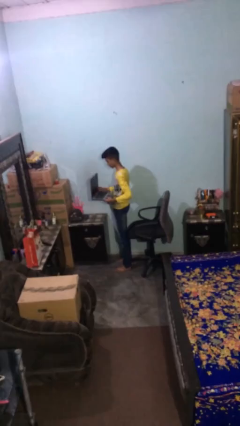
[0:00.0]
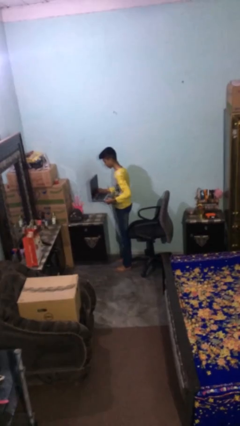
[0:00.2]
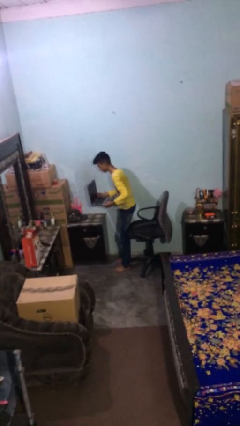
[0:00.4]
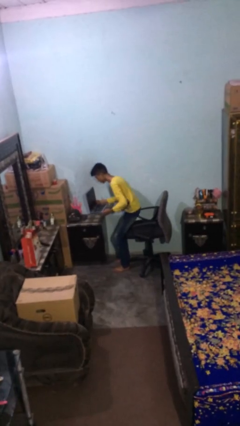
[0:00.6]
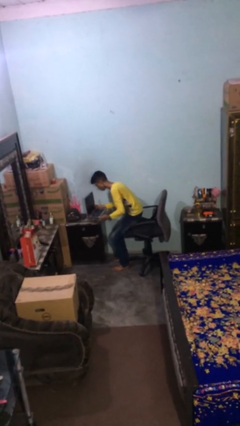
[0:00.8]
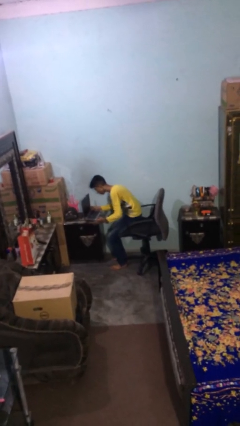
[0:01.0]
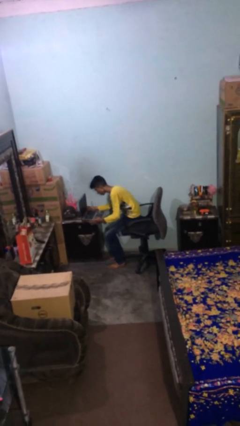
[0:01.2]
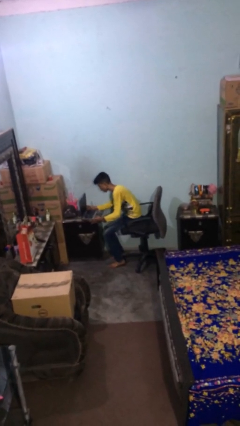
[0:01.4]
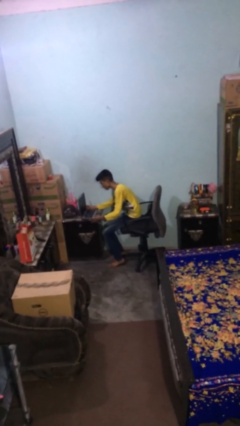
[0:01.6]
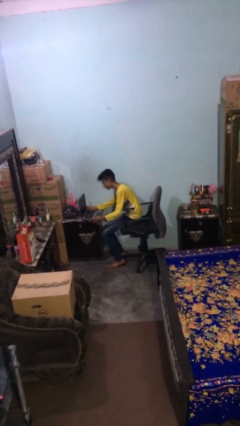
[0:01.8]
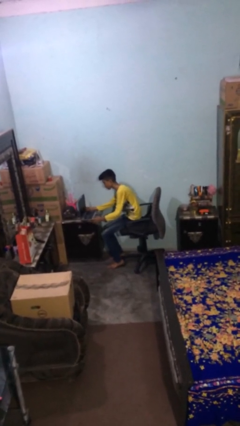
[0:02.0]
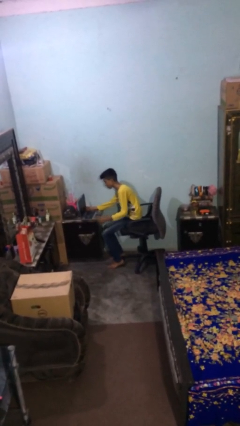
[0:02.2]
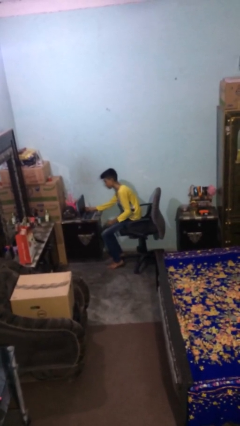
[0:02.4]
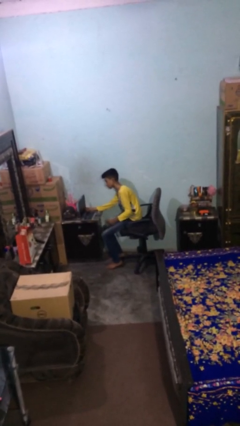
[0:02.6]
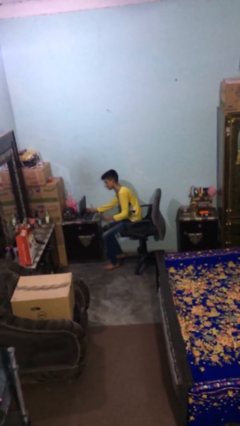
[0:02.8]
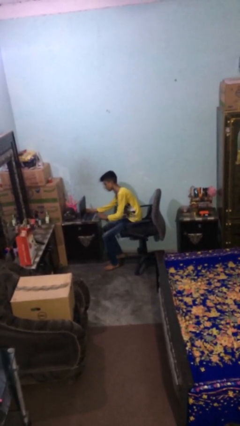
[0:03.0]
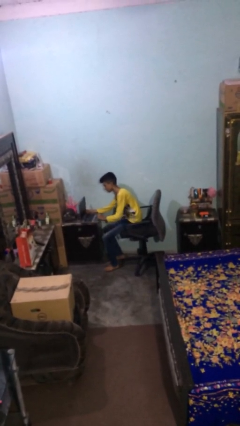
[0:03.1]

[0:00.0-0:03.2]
person sits down

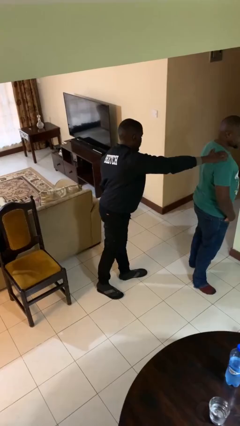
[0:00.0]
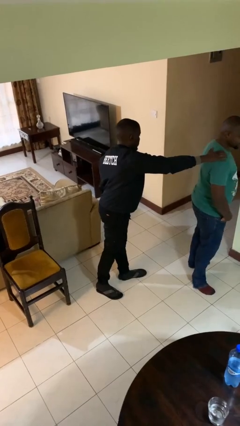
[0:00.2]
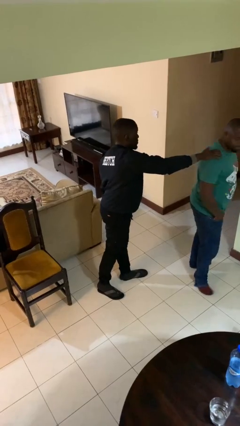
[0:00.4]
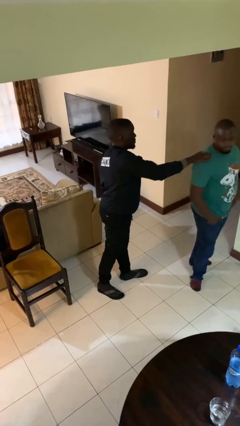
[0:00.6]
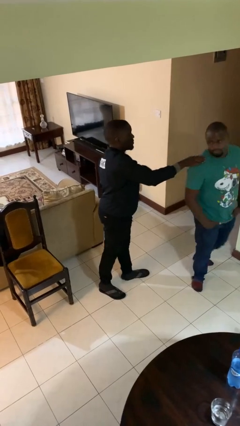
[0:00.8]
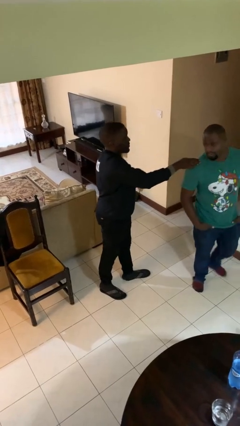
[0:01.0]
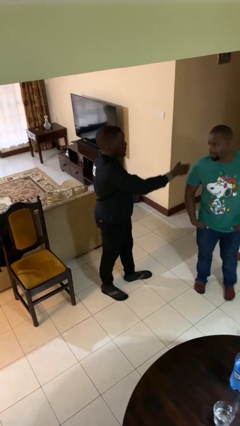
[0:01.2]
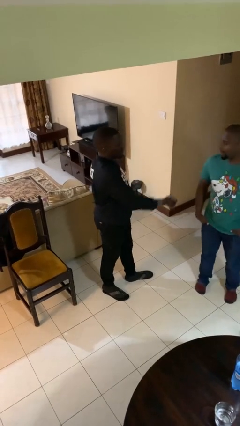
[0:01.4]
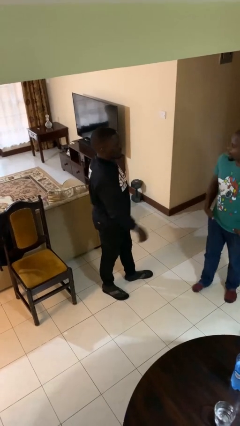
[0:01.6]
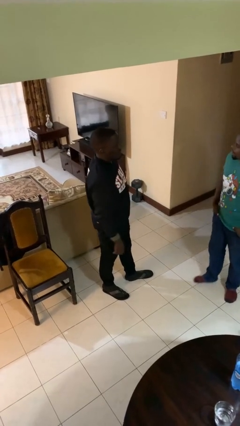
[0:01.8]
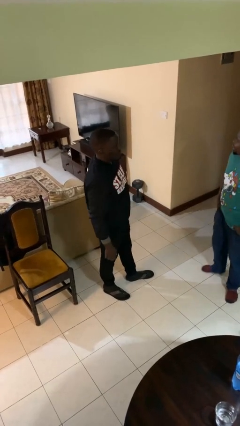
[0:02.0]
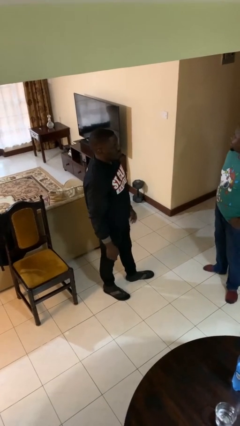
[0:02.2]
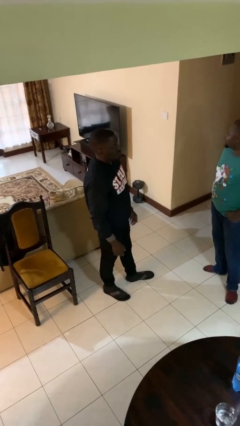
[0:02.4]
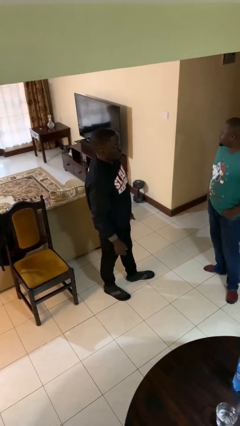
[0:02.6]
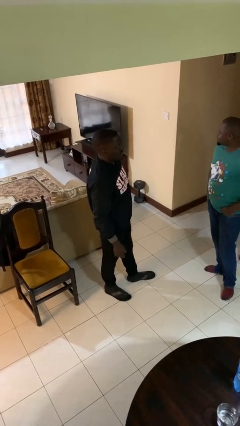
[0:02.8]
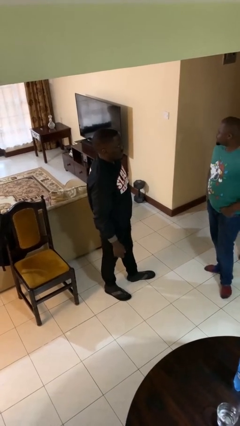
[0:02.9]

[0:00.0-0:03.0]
person spins person around

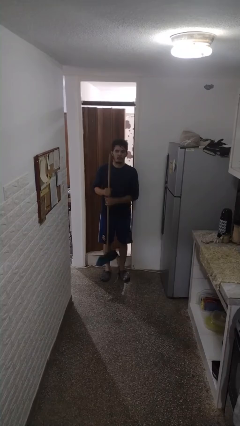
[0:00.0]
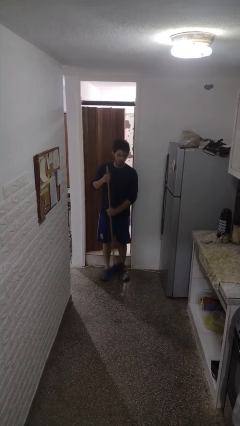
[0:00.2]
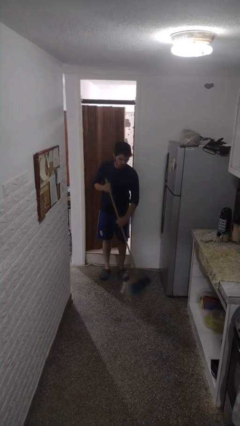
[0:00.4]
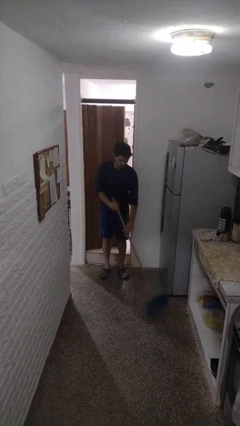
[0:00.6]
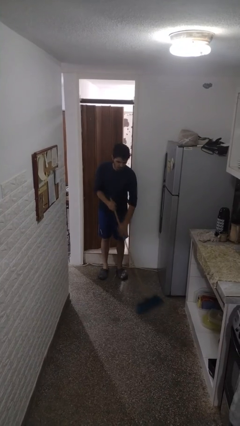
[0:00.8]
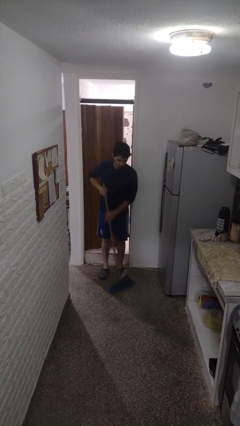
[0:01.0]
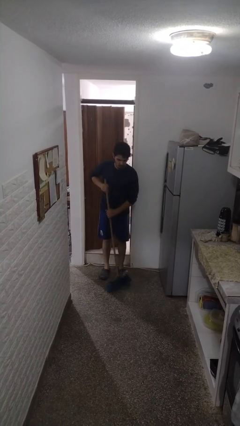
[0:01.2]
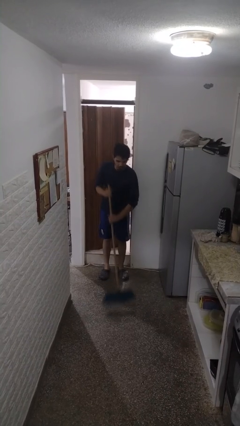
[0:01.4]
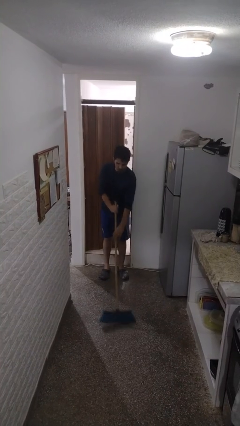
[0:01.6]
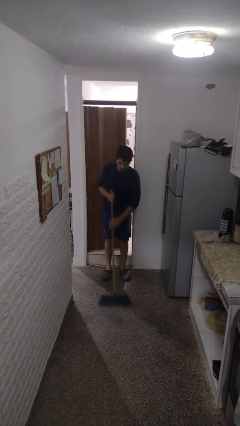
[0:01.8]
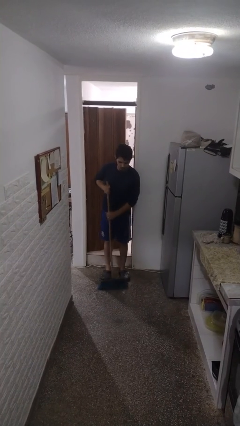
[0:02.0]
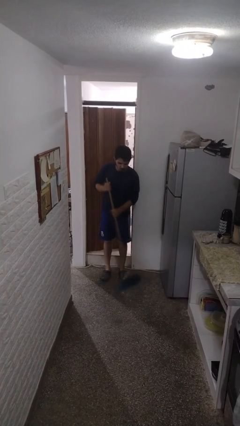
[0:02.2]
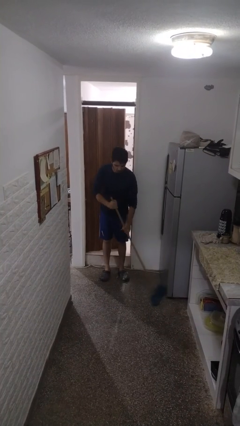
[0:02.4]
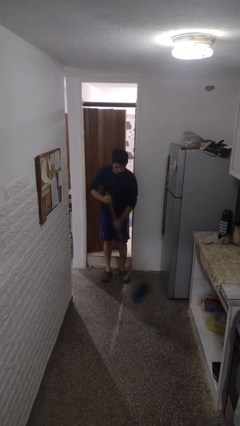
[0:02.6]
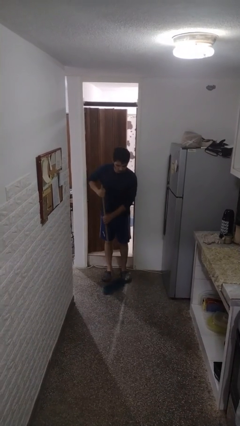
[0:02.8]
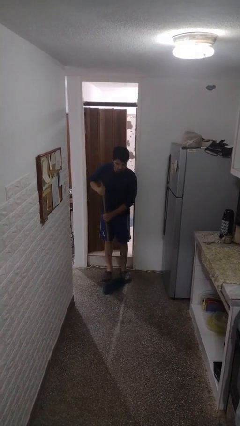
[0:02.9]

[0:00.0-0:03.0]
person sweeps floor

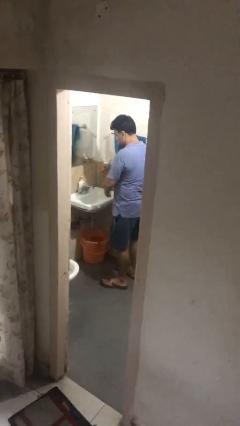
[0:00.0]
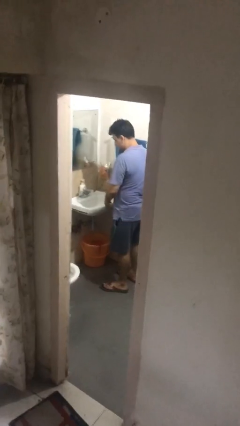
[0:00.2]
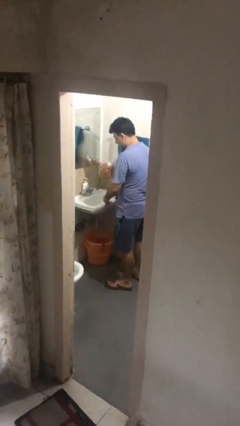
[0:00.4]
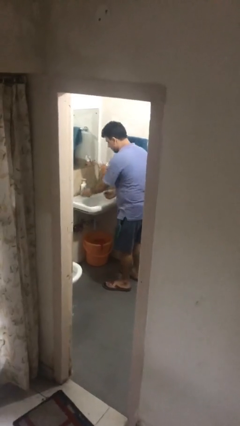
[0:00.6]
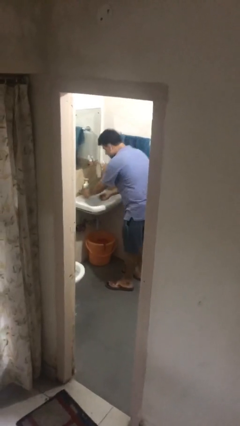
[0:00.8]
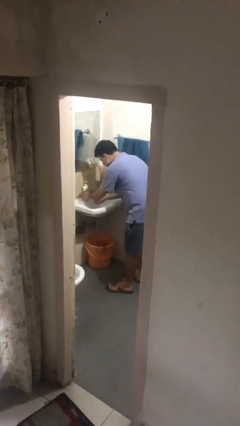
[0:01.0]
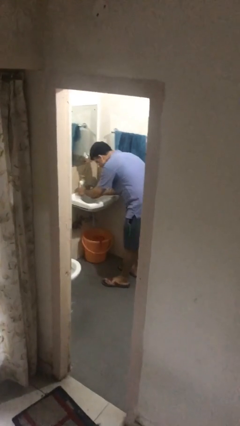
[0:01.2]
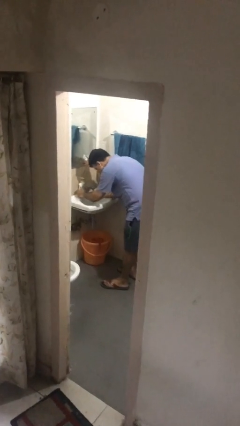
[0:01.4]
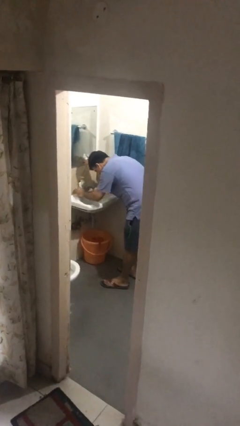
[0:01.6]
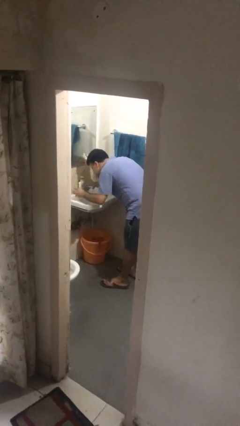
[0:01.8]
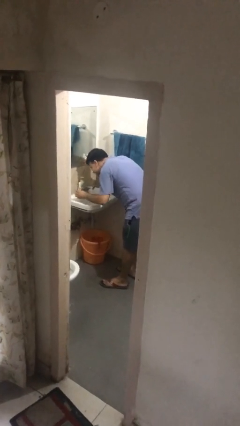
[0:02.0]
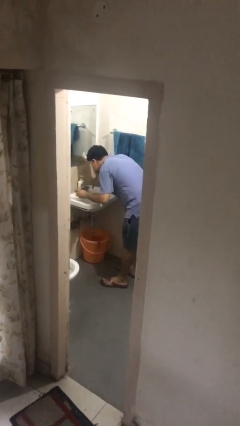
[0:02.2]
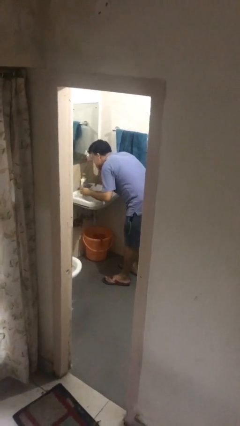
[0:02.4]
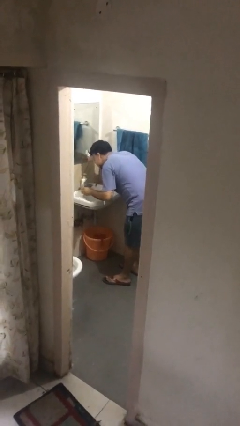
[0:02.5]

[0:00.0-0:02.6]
person washes face

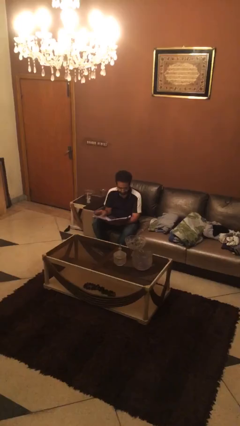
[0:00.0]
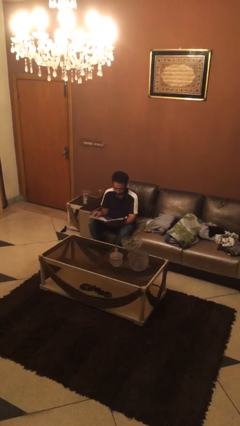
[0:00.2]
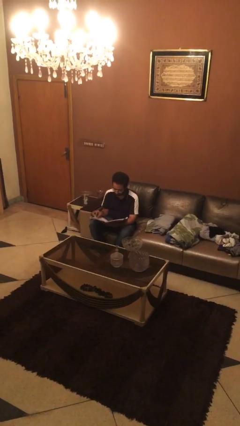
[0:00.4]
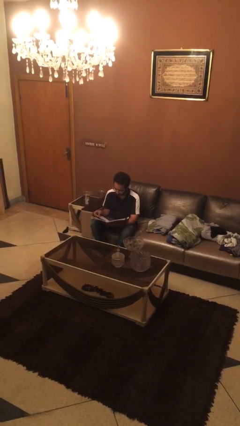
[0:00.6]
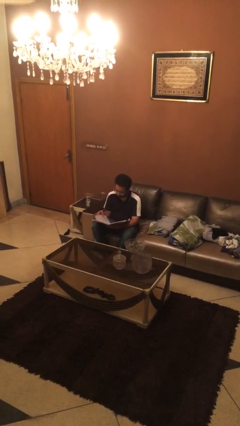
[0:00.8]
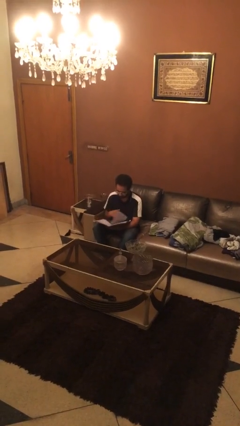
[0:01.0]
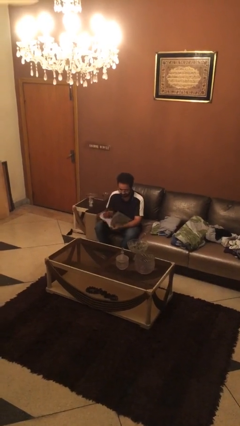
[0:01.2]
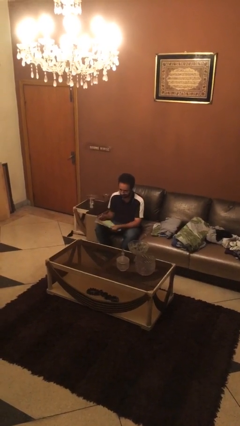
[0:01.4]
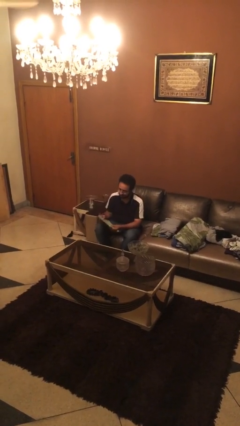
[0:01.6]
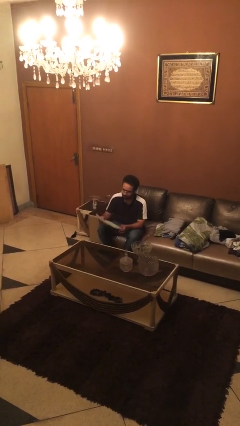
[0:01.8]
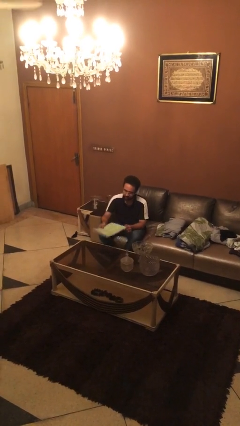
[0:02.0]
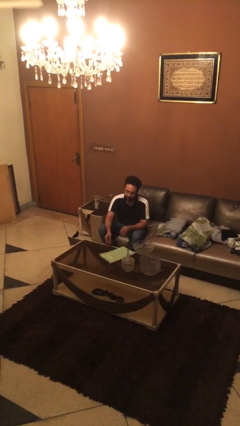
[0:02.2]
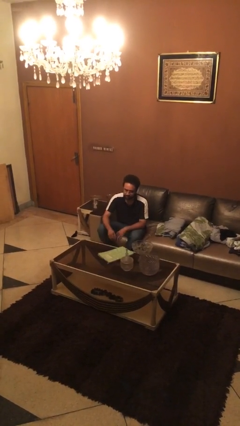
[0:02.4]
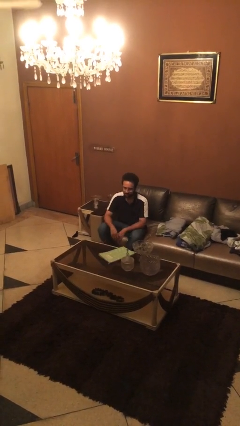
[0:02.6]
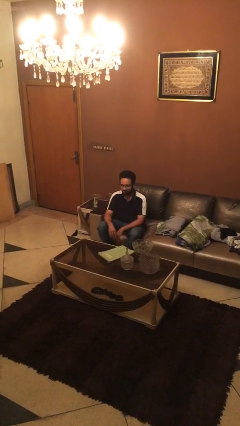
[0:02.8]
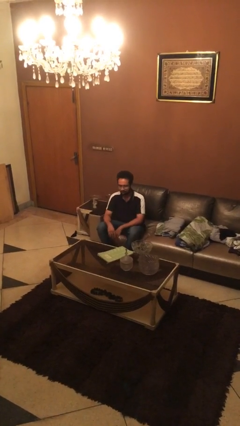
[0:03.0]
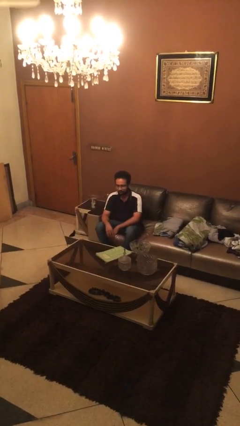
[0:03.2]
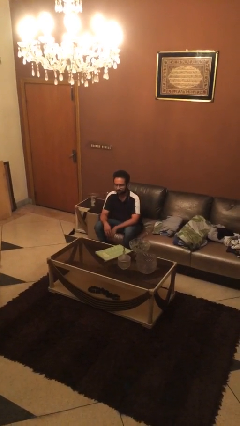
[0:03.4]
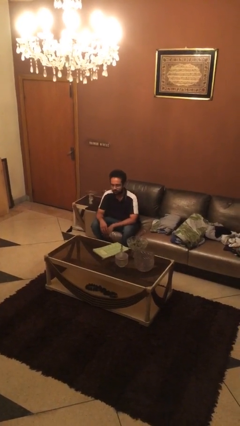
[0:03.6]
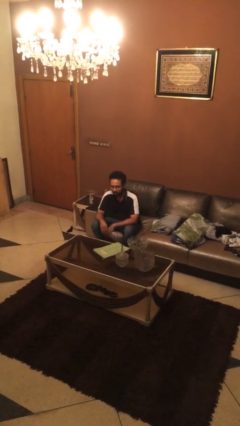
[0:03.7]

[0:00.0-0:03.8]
person puts down object on table

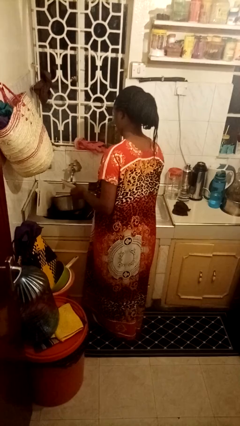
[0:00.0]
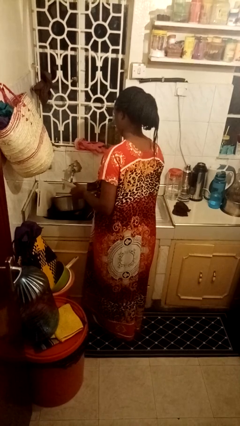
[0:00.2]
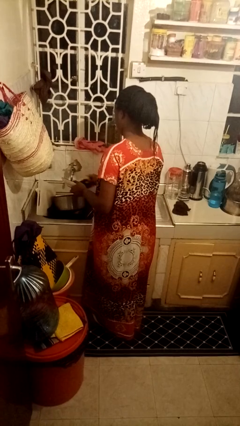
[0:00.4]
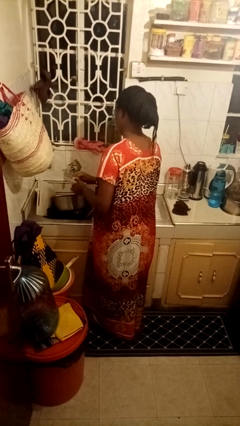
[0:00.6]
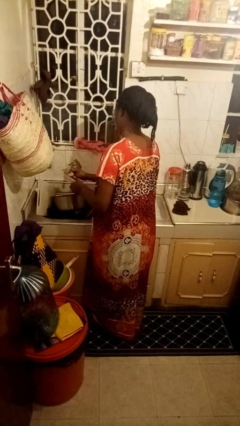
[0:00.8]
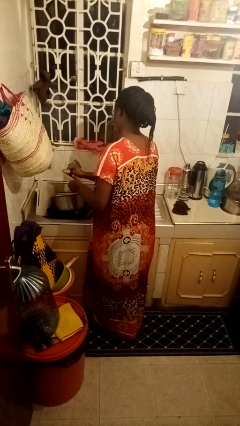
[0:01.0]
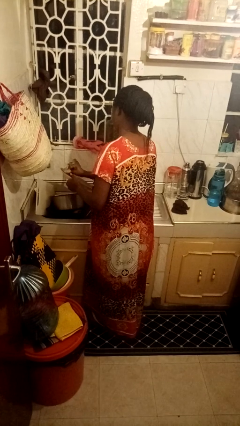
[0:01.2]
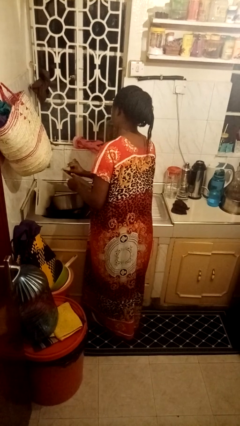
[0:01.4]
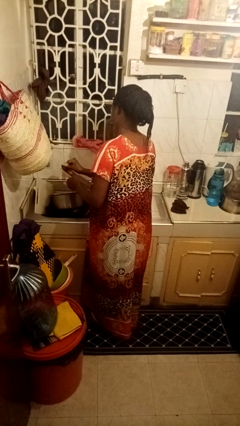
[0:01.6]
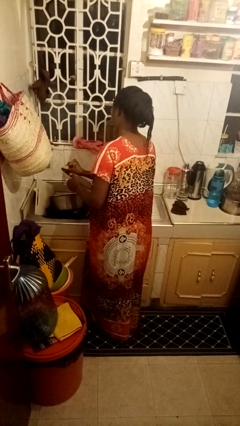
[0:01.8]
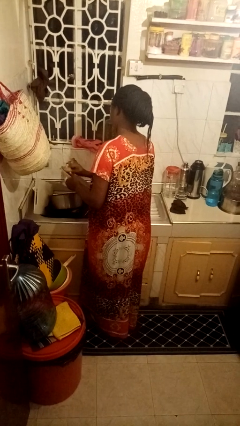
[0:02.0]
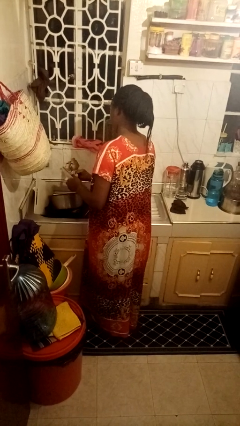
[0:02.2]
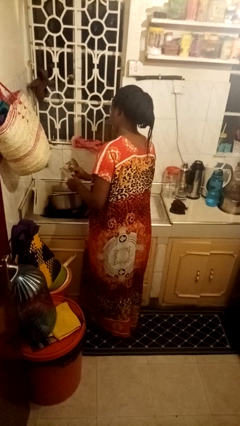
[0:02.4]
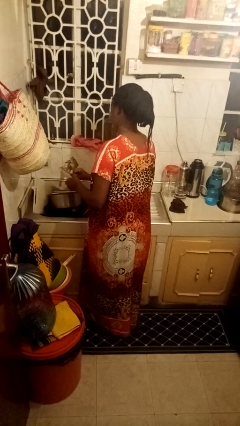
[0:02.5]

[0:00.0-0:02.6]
person washes dish
